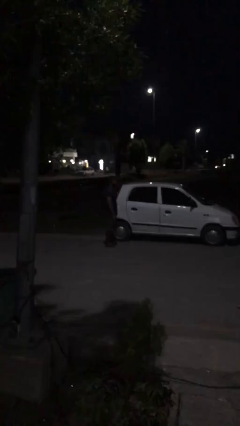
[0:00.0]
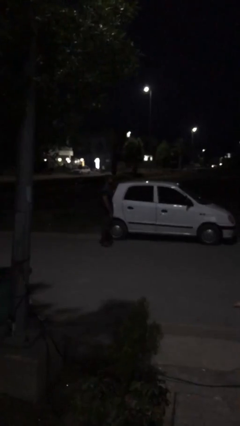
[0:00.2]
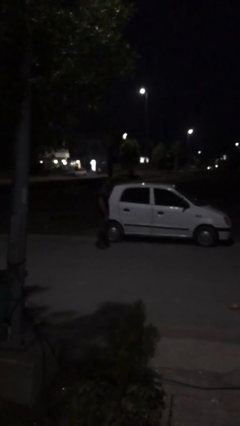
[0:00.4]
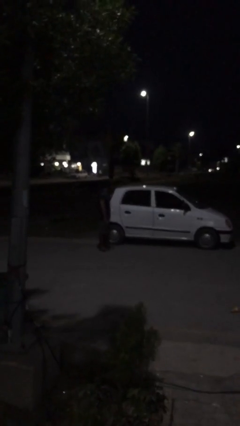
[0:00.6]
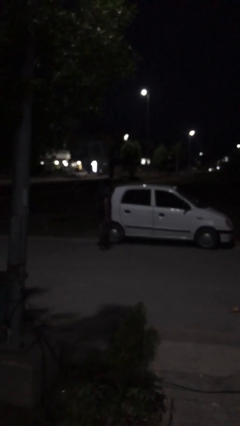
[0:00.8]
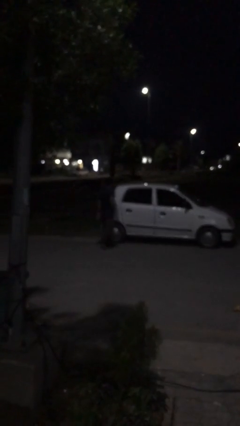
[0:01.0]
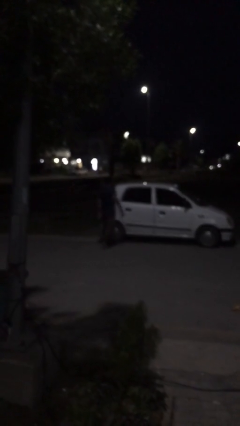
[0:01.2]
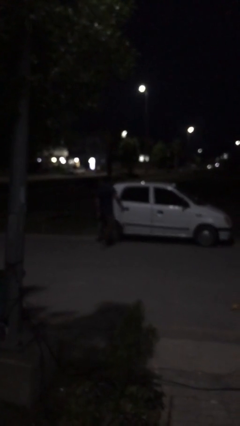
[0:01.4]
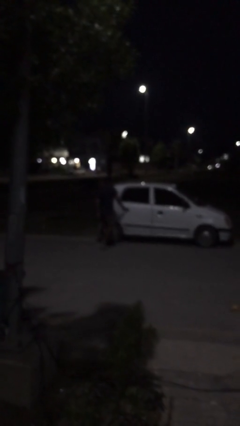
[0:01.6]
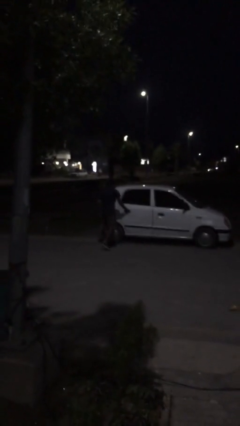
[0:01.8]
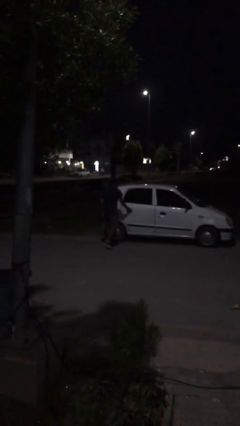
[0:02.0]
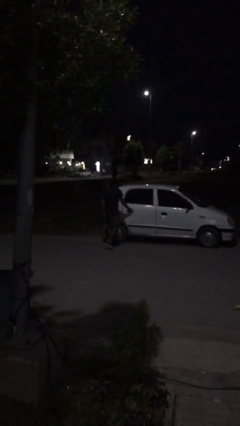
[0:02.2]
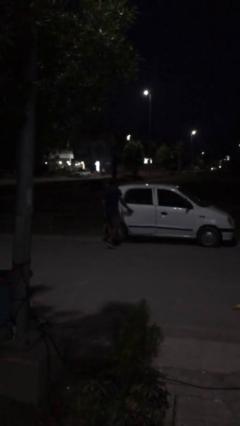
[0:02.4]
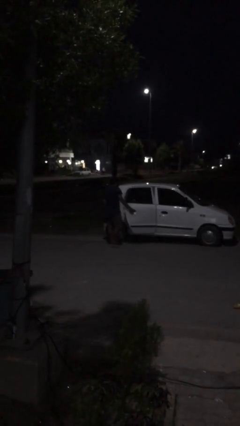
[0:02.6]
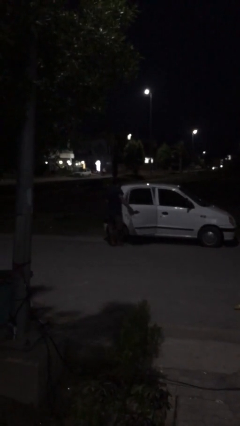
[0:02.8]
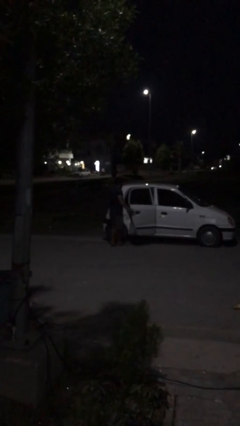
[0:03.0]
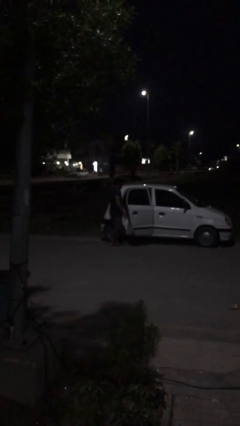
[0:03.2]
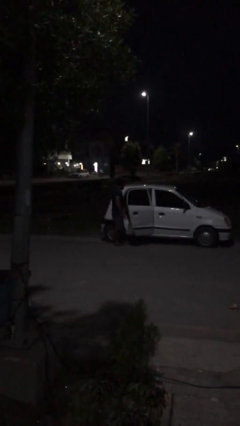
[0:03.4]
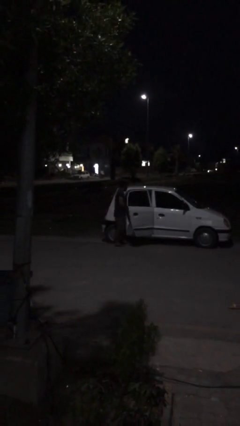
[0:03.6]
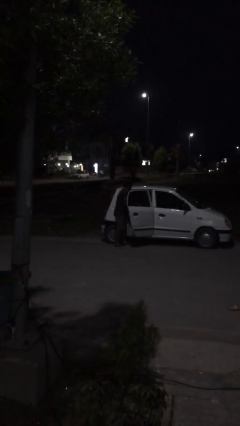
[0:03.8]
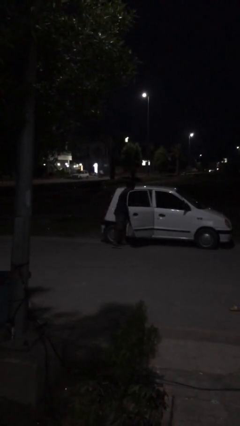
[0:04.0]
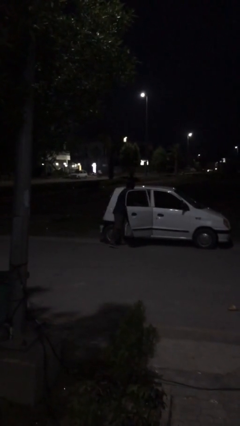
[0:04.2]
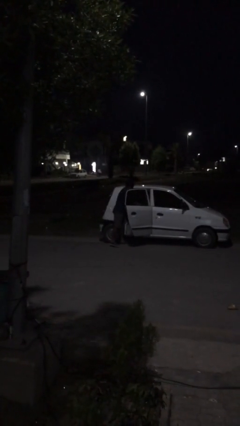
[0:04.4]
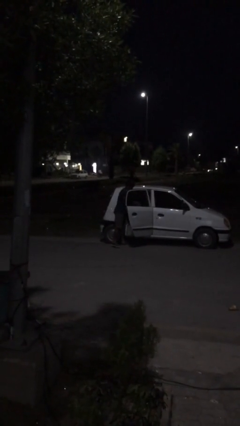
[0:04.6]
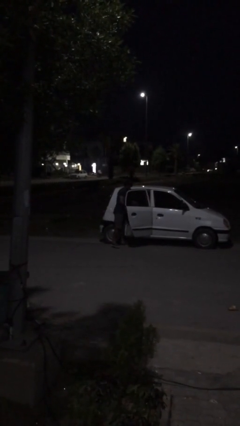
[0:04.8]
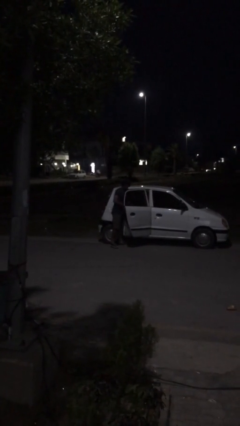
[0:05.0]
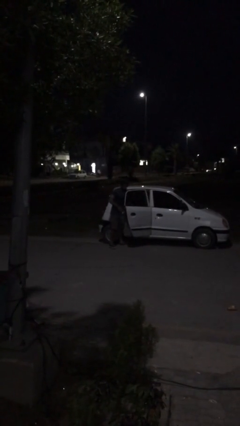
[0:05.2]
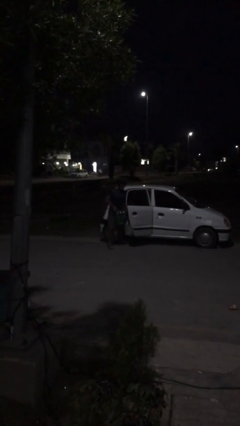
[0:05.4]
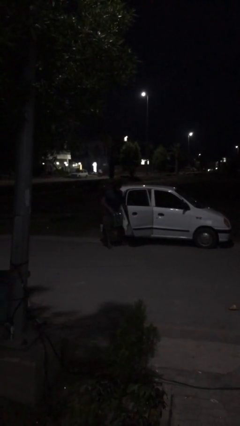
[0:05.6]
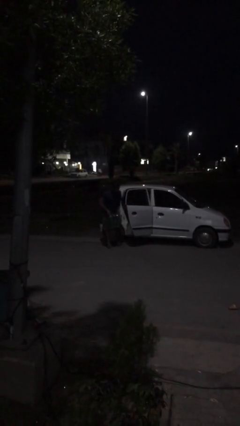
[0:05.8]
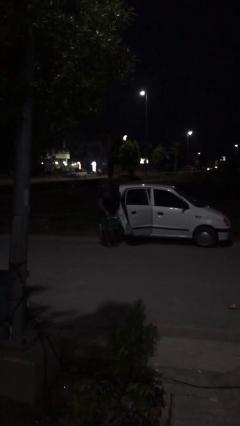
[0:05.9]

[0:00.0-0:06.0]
person opens car door

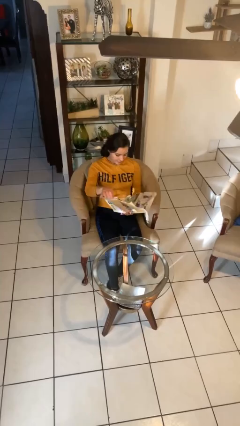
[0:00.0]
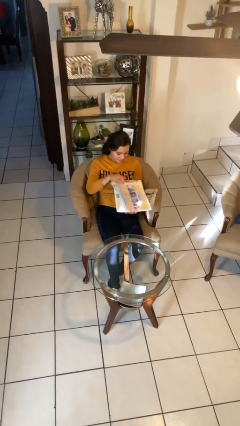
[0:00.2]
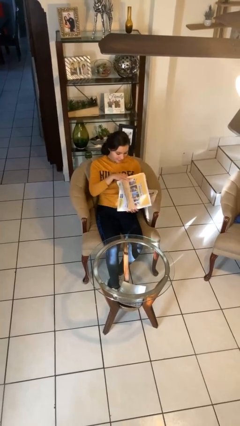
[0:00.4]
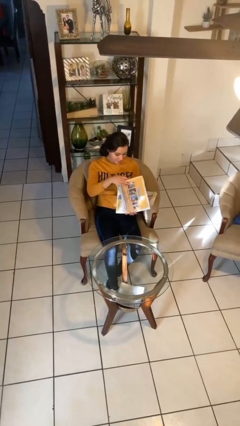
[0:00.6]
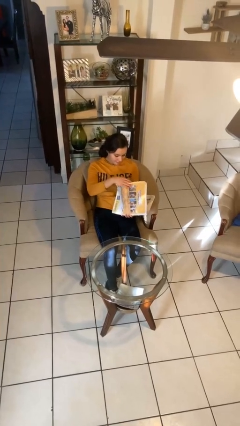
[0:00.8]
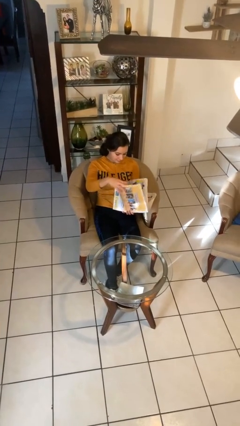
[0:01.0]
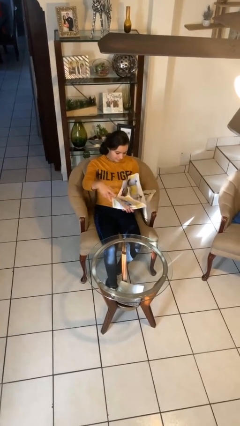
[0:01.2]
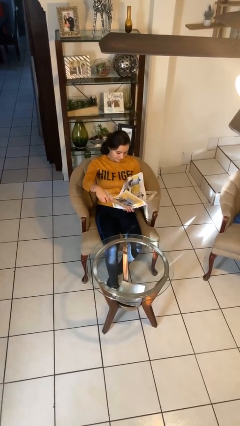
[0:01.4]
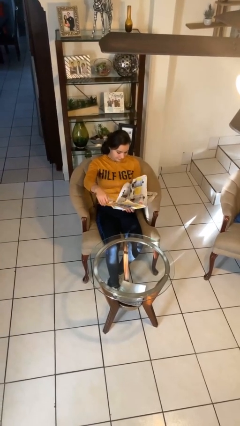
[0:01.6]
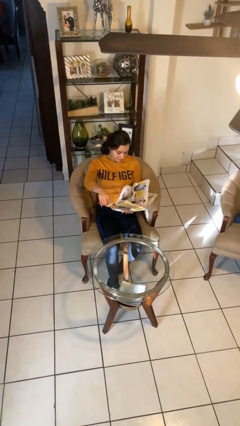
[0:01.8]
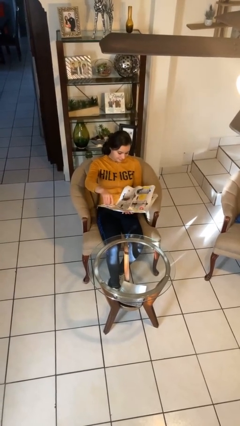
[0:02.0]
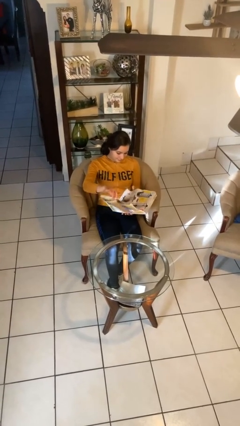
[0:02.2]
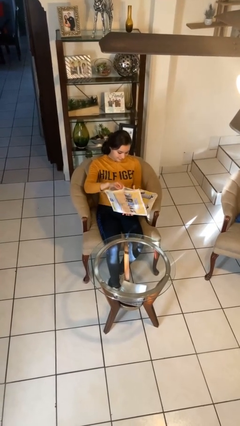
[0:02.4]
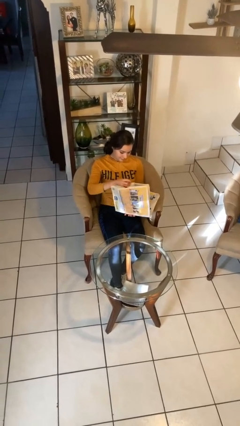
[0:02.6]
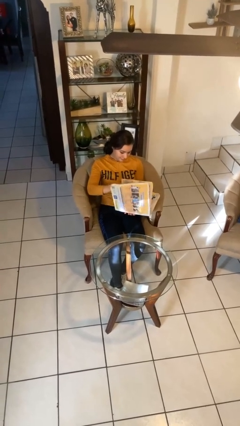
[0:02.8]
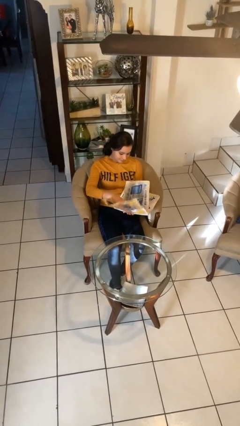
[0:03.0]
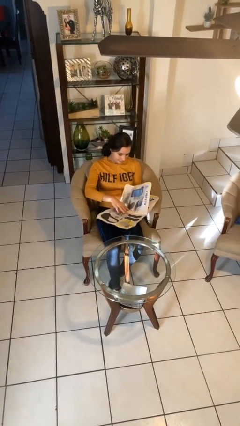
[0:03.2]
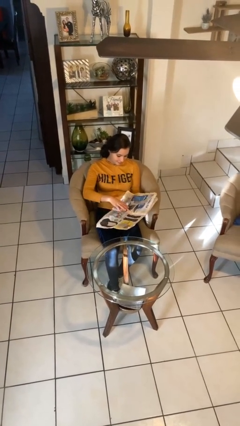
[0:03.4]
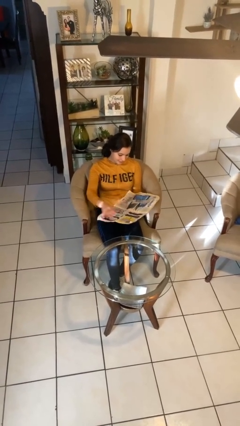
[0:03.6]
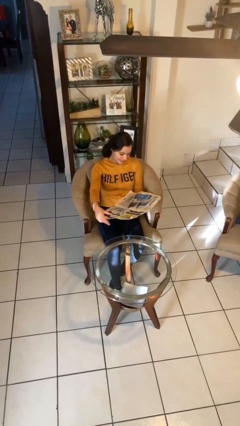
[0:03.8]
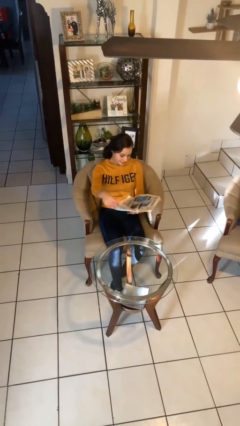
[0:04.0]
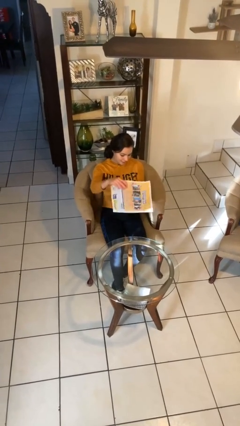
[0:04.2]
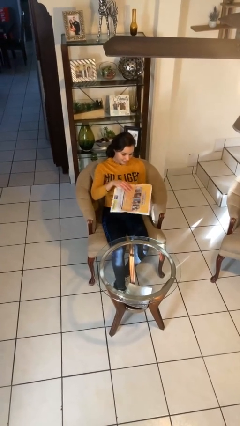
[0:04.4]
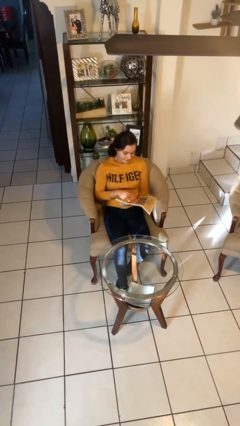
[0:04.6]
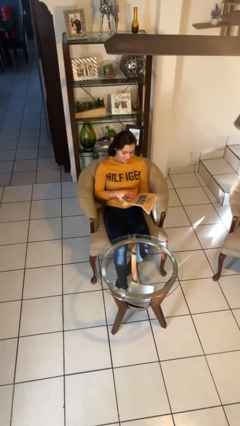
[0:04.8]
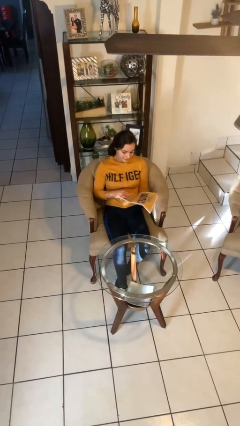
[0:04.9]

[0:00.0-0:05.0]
person reads newspaper

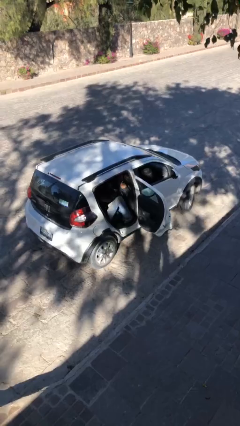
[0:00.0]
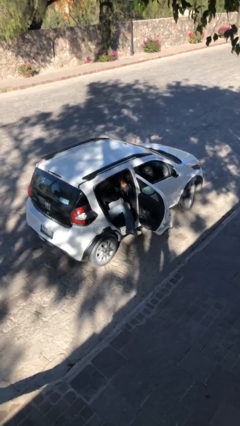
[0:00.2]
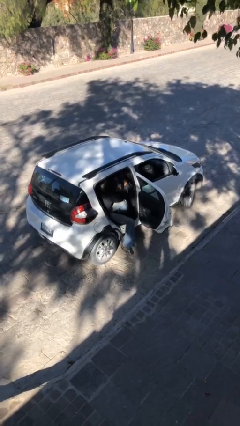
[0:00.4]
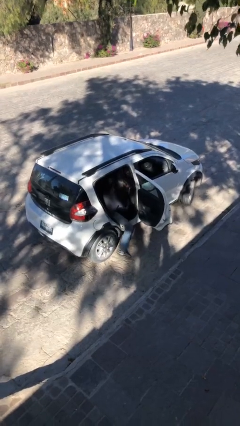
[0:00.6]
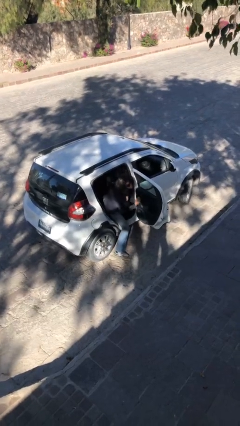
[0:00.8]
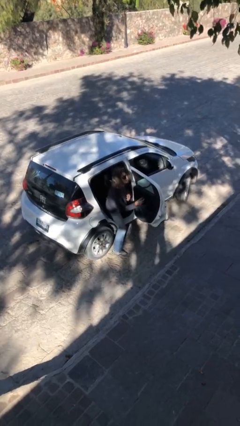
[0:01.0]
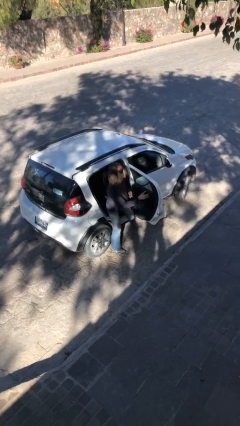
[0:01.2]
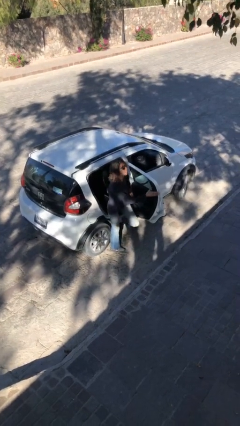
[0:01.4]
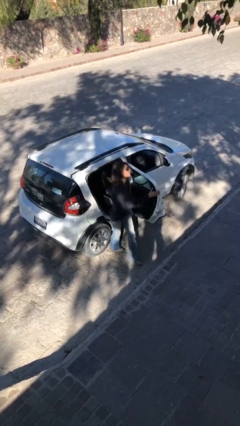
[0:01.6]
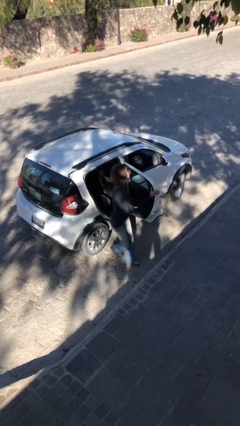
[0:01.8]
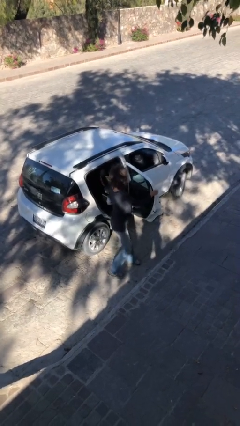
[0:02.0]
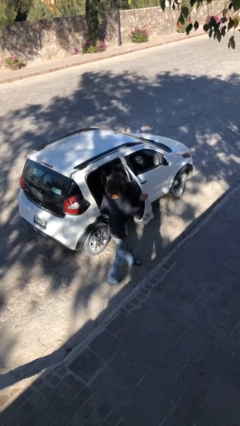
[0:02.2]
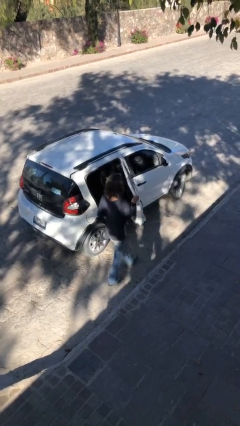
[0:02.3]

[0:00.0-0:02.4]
person exits car

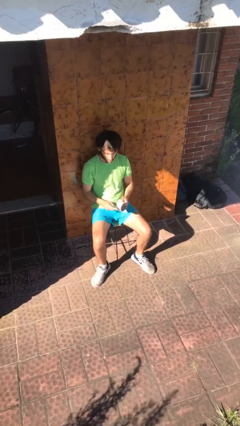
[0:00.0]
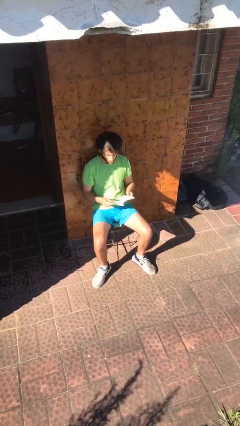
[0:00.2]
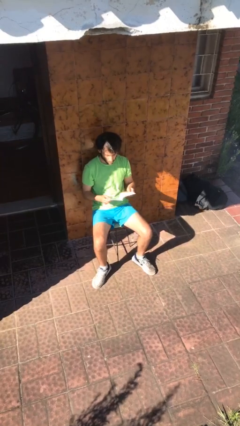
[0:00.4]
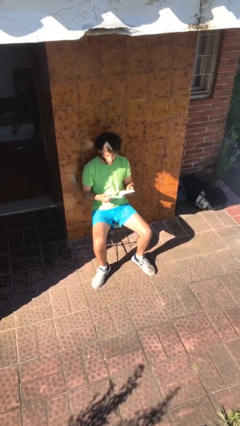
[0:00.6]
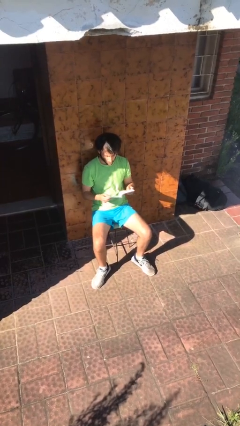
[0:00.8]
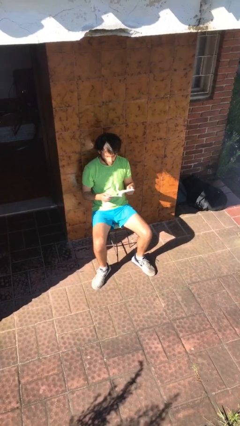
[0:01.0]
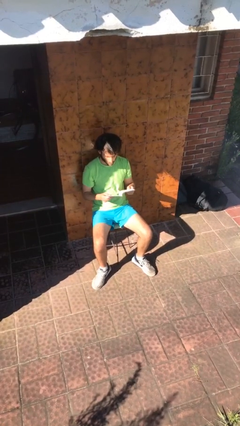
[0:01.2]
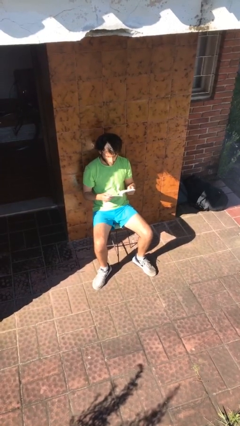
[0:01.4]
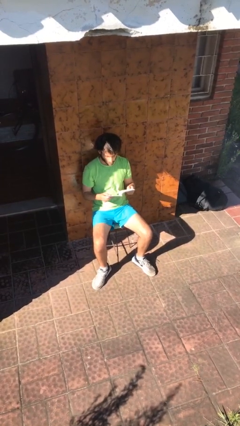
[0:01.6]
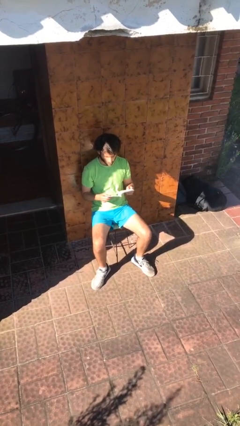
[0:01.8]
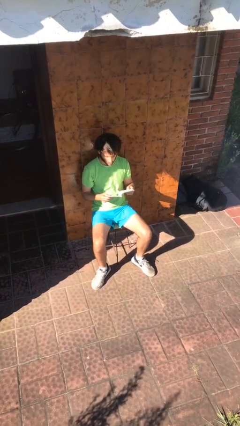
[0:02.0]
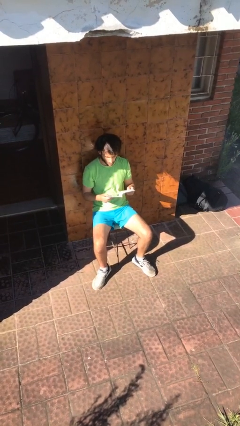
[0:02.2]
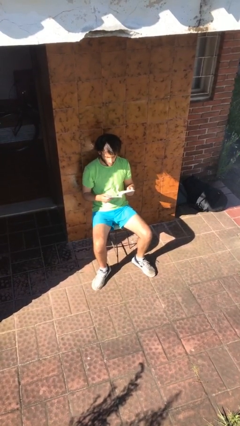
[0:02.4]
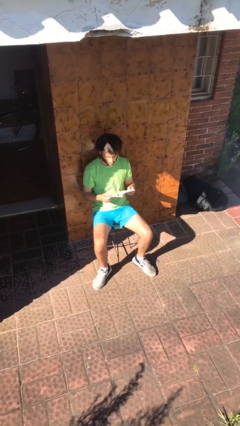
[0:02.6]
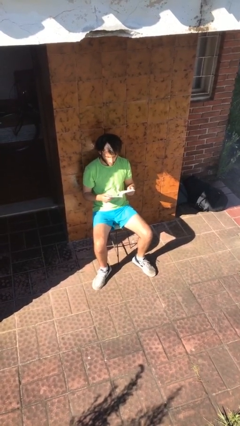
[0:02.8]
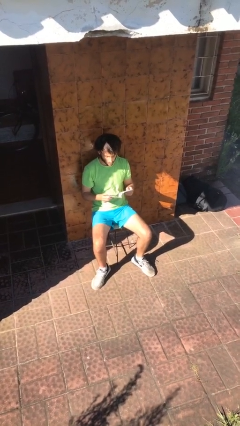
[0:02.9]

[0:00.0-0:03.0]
person reads document

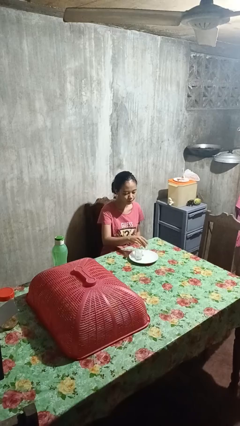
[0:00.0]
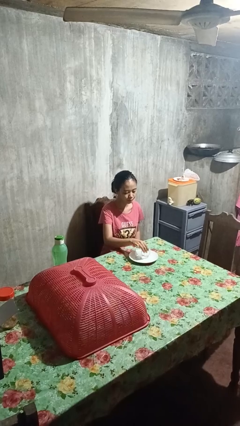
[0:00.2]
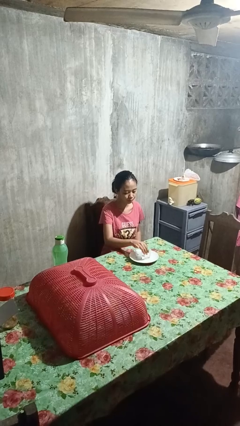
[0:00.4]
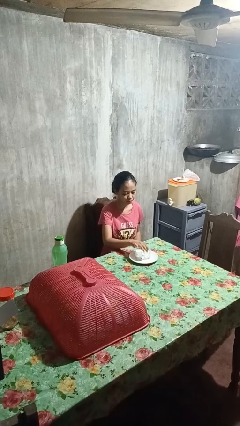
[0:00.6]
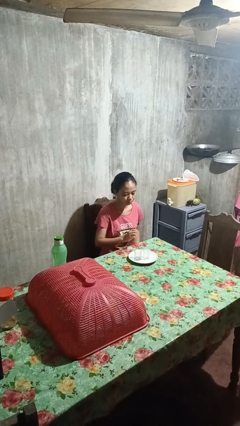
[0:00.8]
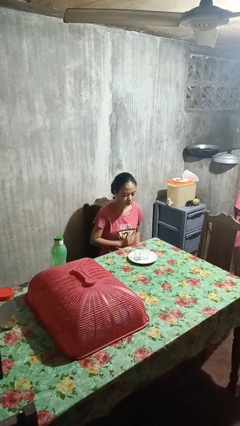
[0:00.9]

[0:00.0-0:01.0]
person puts down object on table
